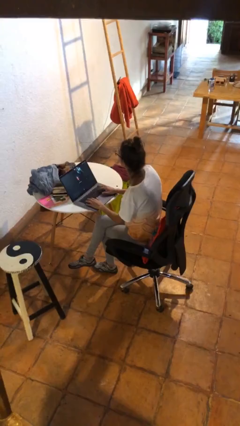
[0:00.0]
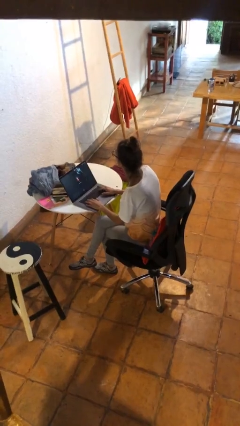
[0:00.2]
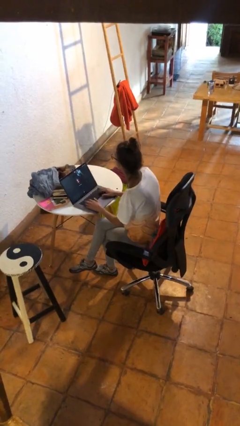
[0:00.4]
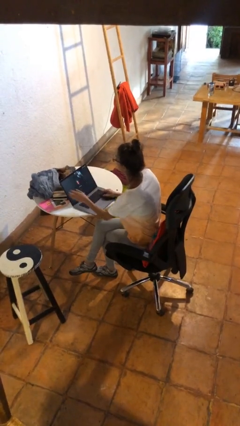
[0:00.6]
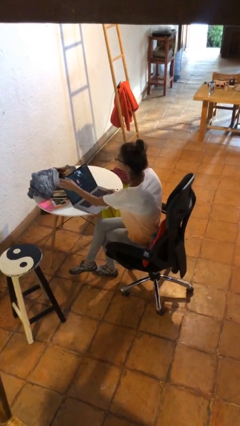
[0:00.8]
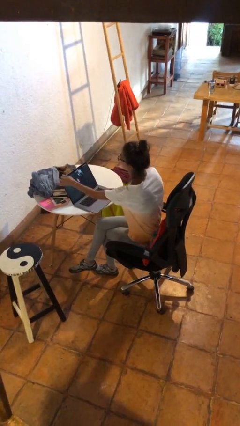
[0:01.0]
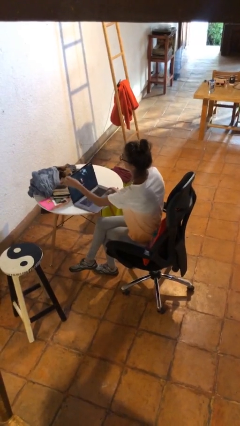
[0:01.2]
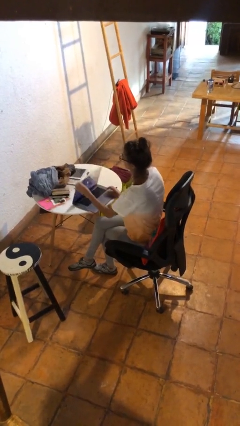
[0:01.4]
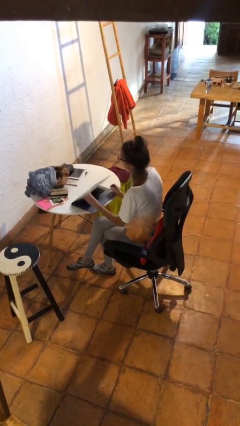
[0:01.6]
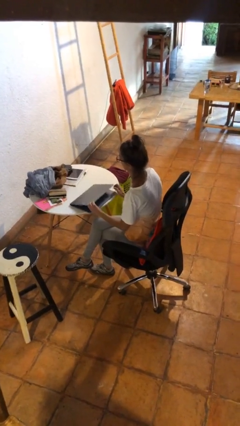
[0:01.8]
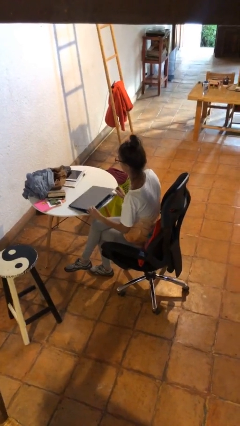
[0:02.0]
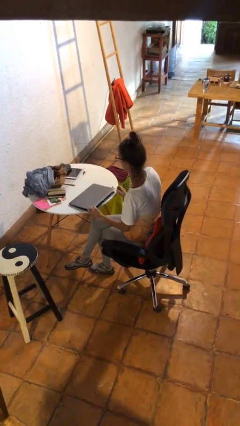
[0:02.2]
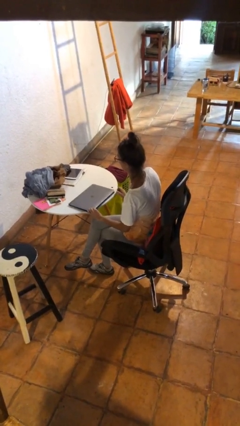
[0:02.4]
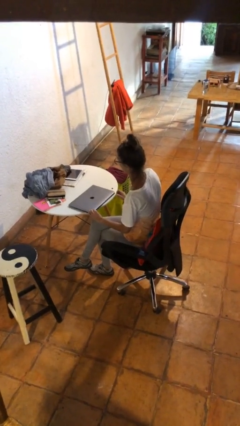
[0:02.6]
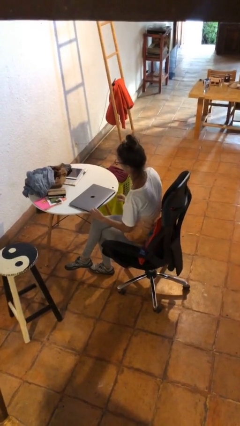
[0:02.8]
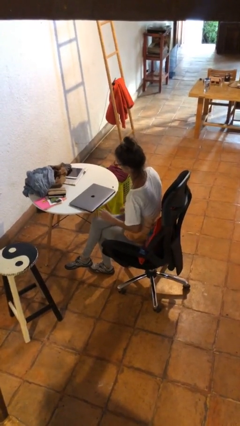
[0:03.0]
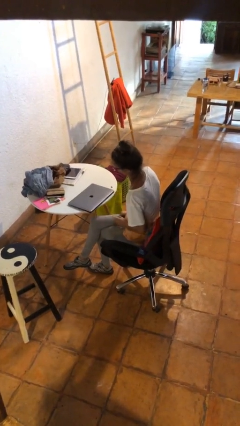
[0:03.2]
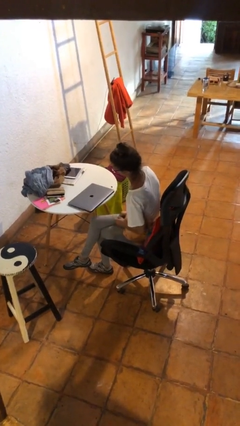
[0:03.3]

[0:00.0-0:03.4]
person closes laptop

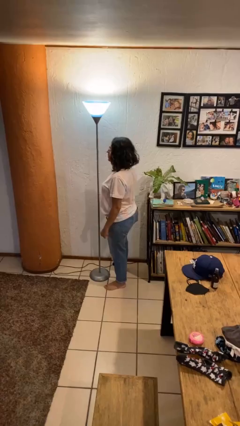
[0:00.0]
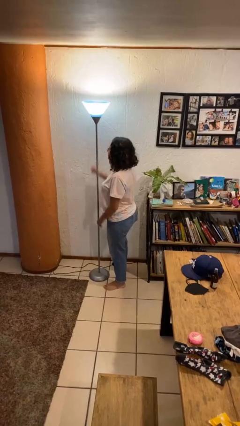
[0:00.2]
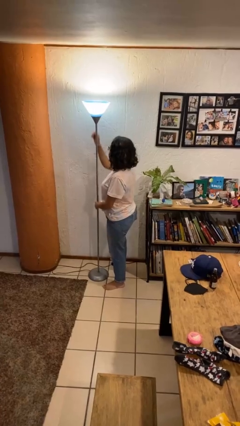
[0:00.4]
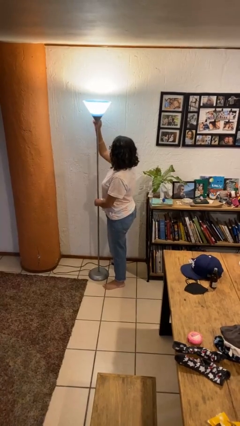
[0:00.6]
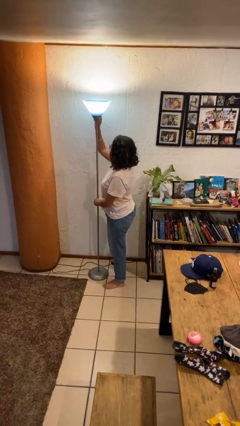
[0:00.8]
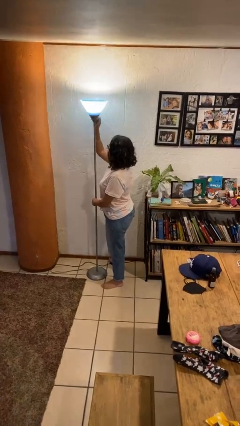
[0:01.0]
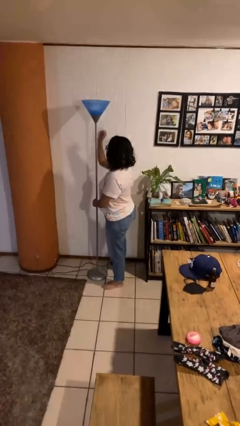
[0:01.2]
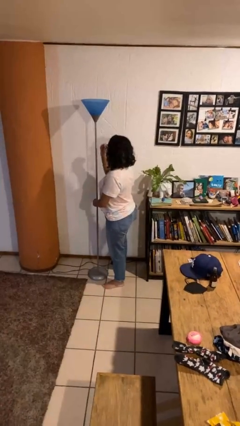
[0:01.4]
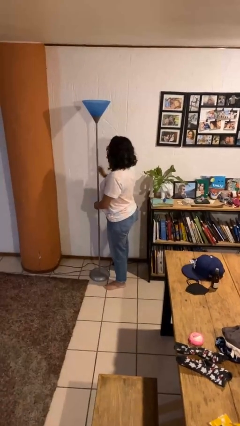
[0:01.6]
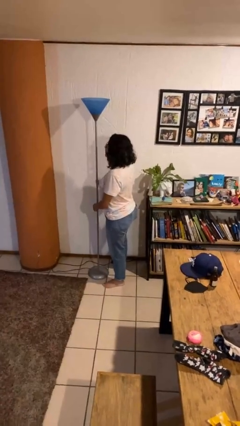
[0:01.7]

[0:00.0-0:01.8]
person turns off lamp

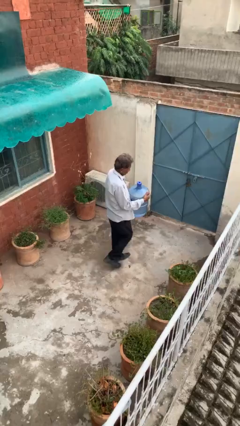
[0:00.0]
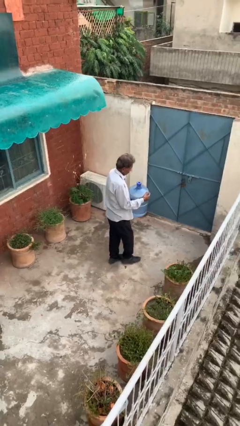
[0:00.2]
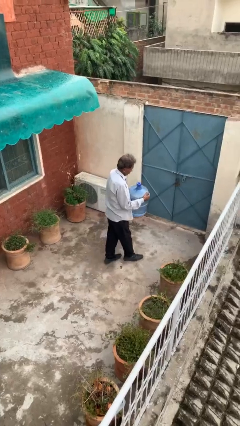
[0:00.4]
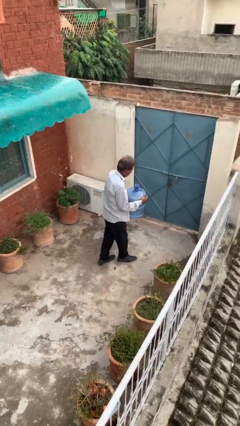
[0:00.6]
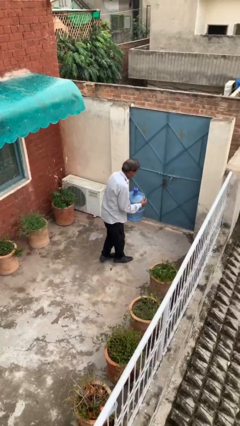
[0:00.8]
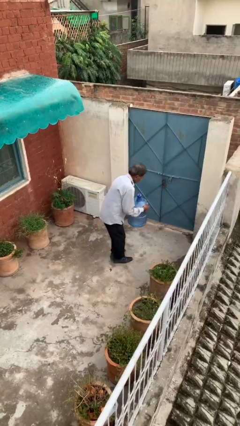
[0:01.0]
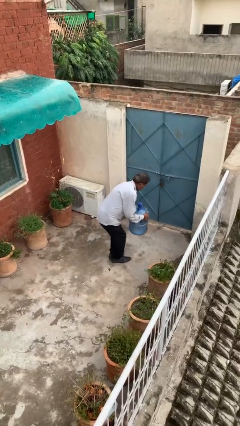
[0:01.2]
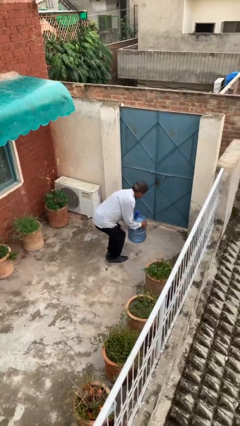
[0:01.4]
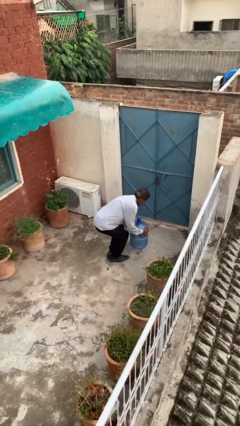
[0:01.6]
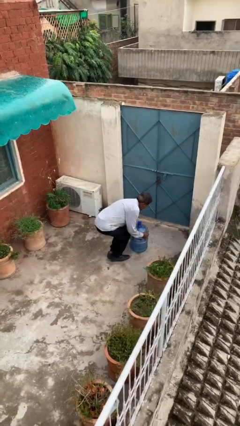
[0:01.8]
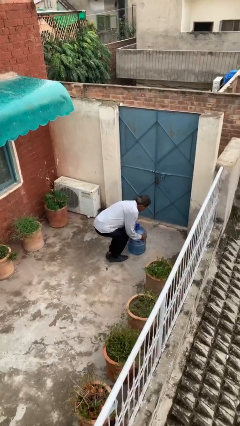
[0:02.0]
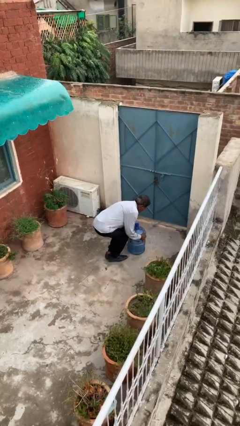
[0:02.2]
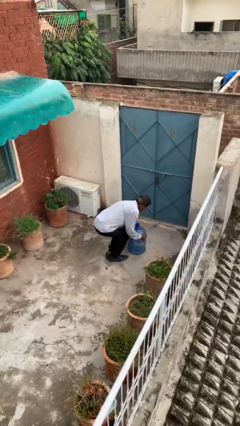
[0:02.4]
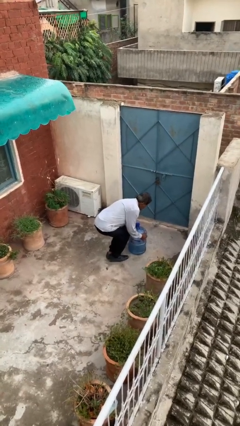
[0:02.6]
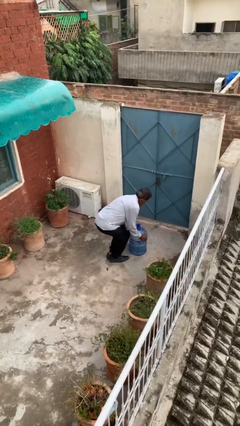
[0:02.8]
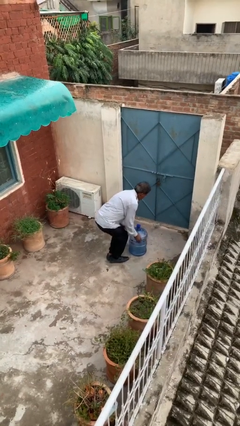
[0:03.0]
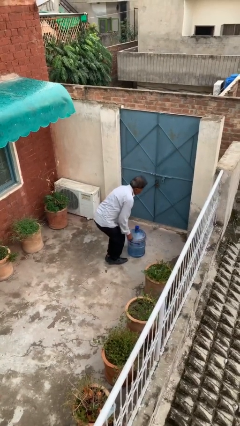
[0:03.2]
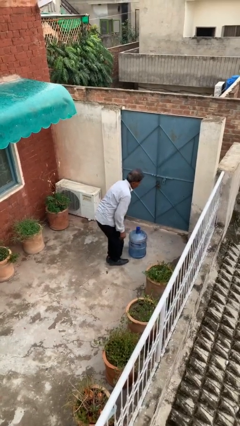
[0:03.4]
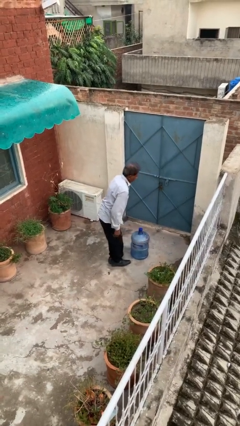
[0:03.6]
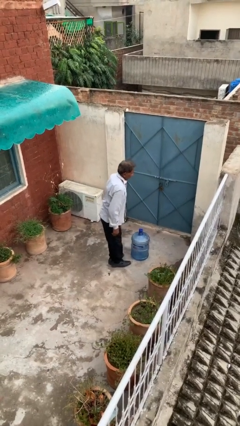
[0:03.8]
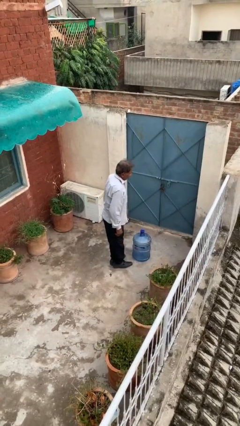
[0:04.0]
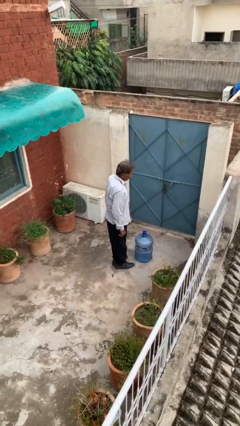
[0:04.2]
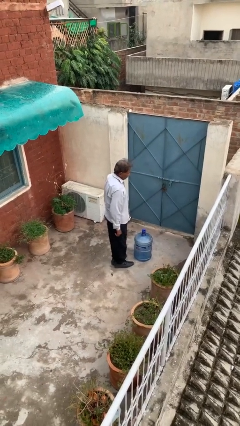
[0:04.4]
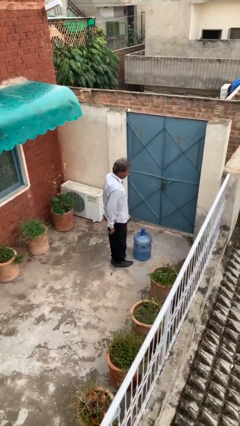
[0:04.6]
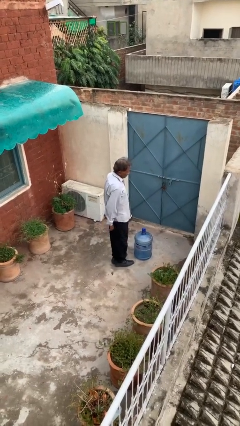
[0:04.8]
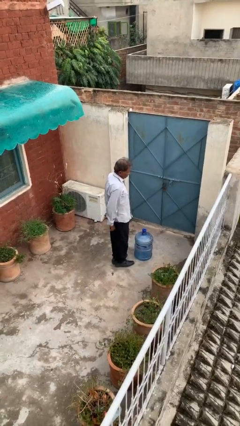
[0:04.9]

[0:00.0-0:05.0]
person puts down object on floor

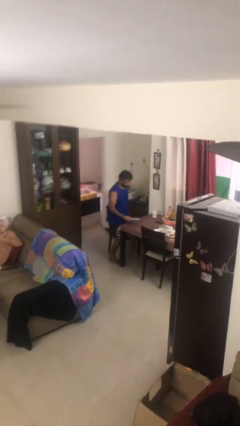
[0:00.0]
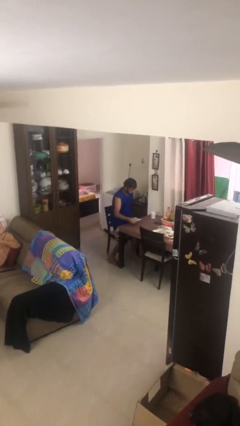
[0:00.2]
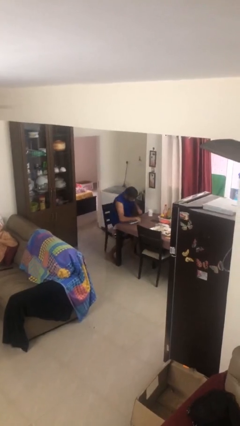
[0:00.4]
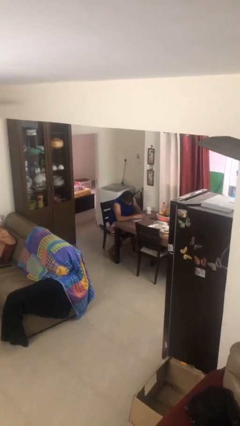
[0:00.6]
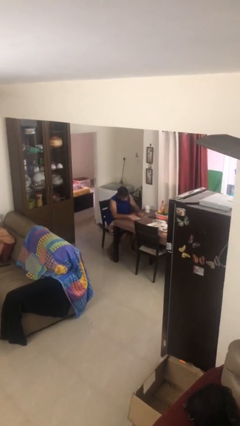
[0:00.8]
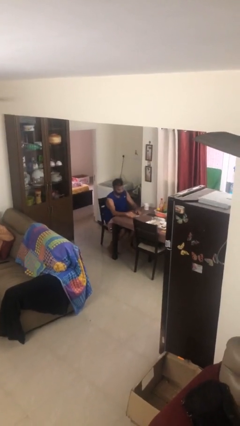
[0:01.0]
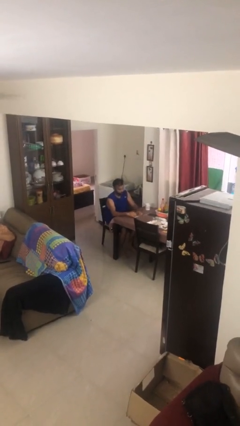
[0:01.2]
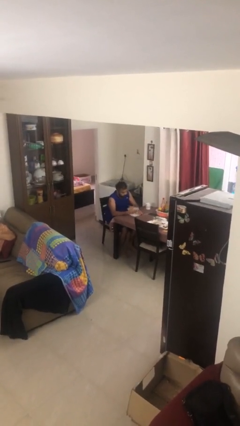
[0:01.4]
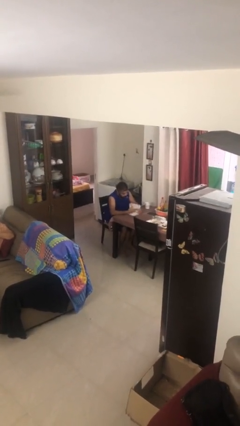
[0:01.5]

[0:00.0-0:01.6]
person sits down

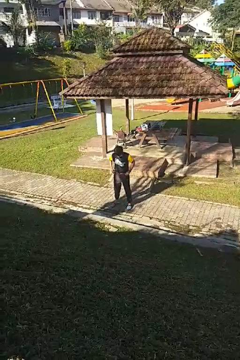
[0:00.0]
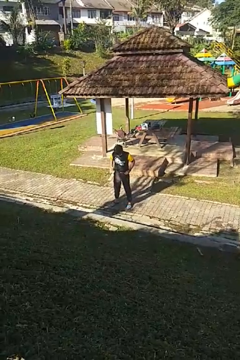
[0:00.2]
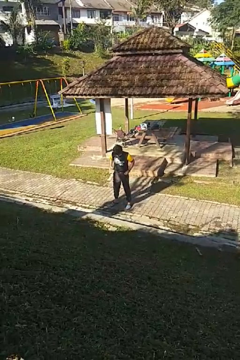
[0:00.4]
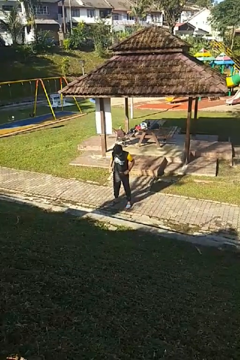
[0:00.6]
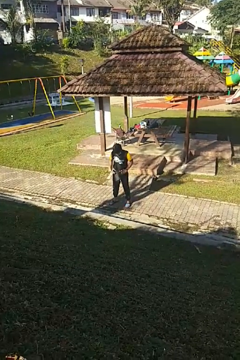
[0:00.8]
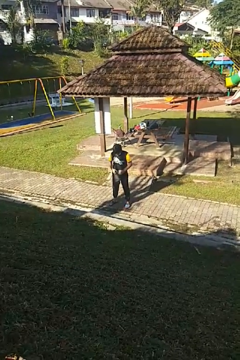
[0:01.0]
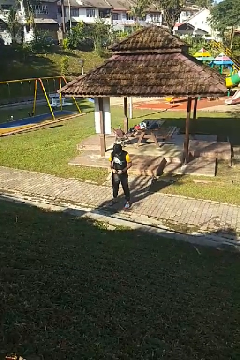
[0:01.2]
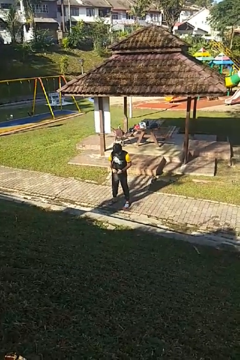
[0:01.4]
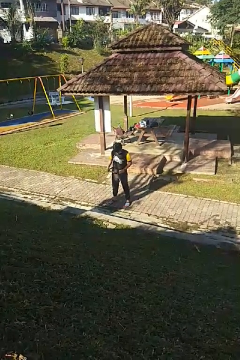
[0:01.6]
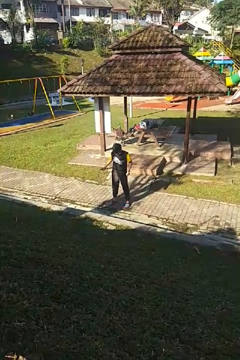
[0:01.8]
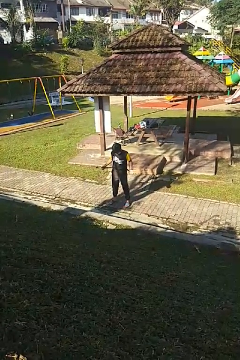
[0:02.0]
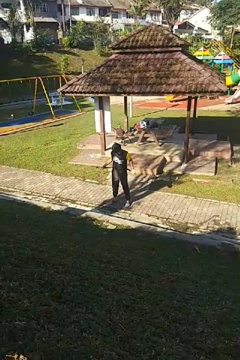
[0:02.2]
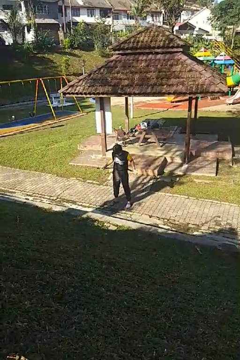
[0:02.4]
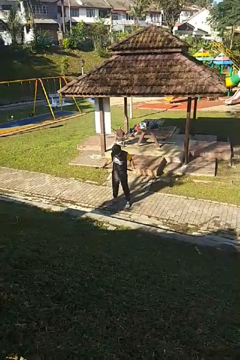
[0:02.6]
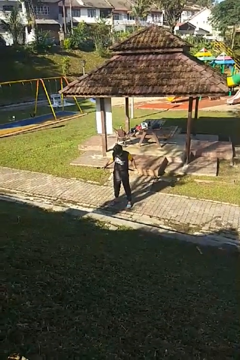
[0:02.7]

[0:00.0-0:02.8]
person takes off belt

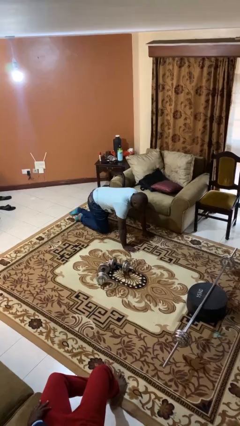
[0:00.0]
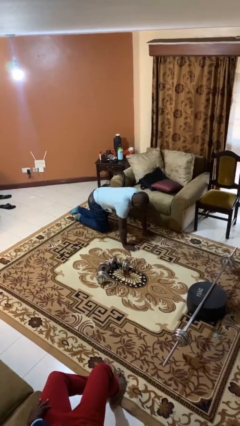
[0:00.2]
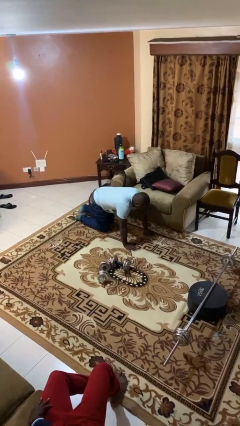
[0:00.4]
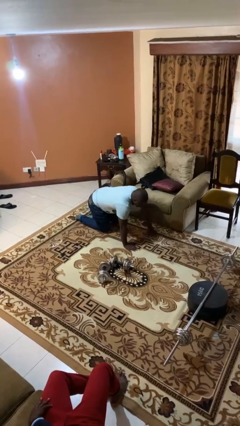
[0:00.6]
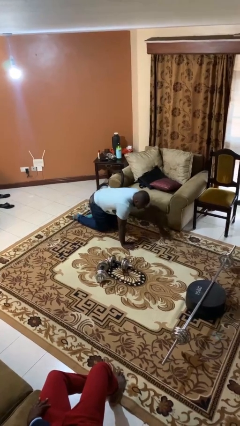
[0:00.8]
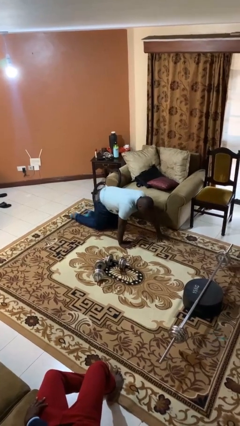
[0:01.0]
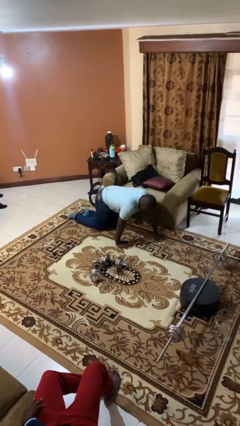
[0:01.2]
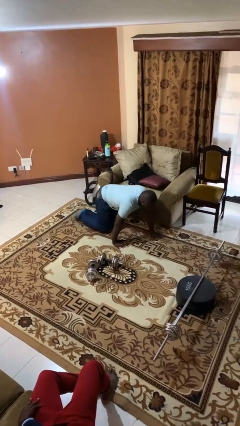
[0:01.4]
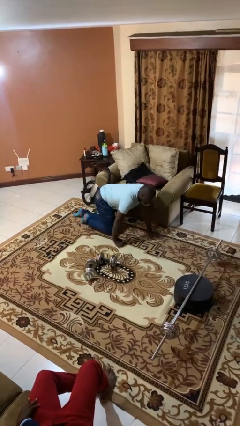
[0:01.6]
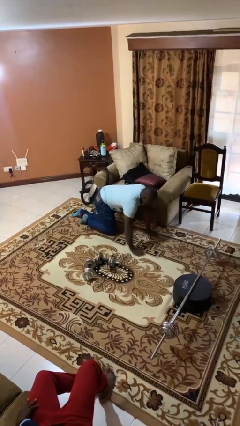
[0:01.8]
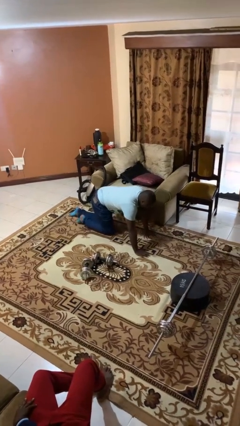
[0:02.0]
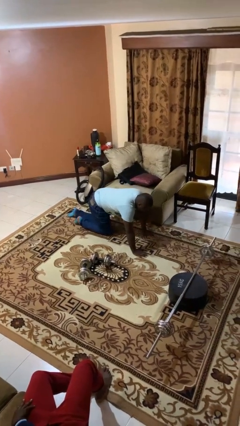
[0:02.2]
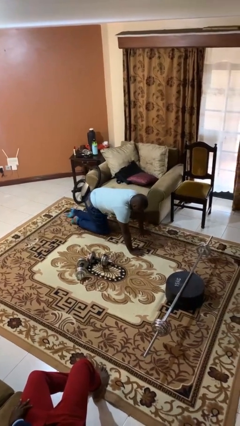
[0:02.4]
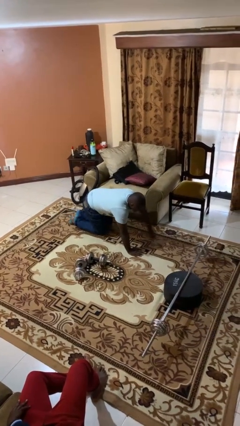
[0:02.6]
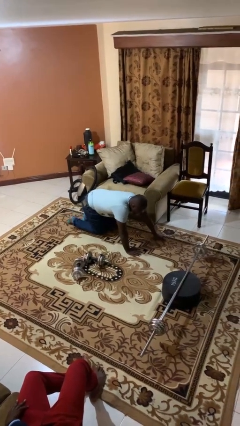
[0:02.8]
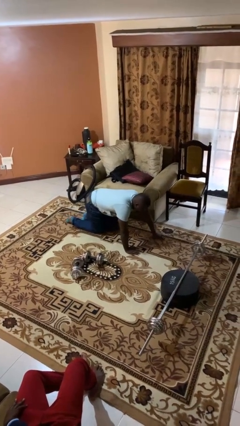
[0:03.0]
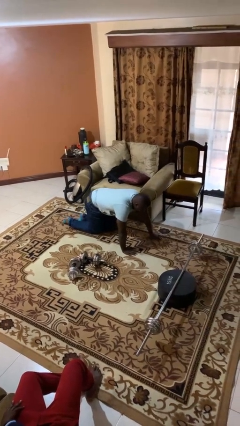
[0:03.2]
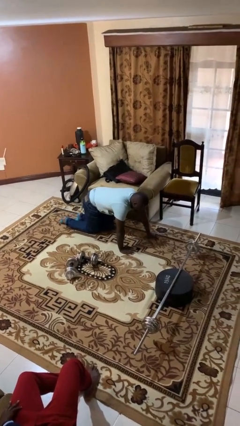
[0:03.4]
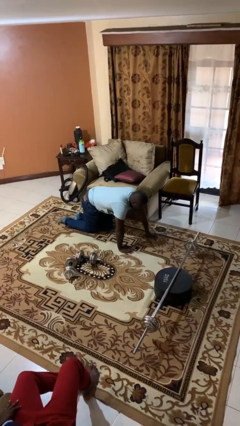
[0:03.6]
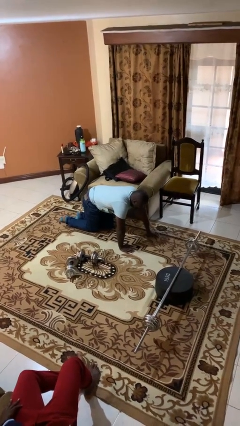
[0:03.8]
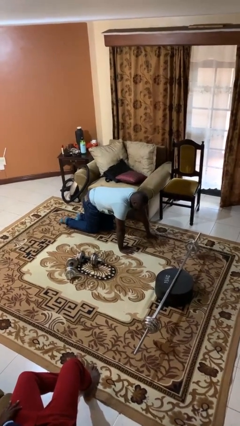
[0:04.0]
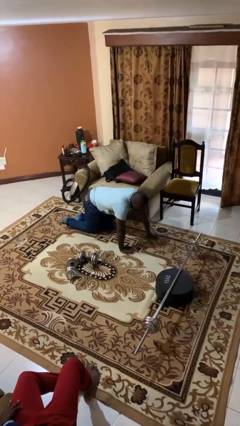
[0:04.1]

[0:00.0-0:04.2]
person crawls
